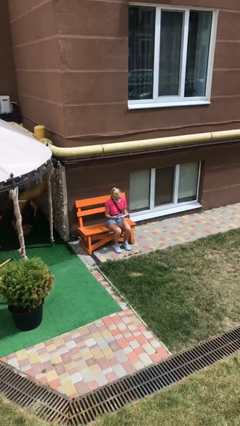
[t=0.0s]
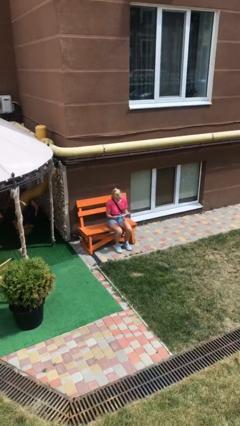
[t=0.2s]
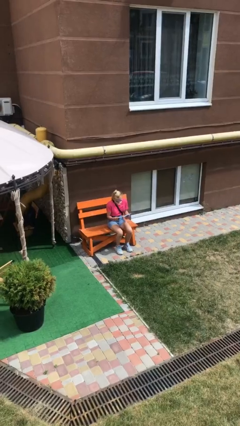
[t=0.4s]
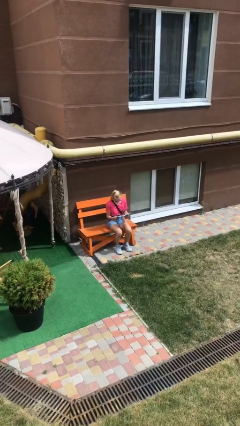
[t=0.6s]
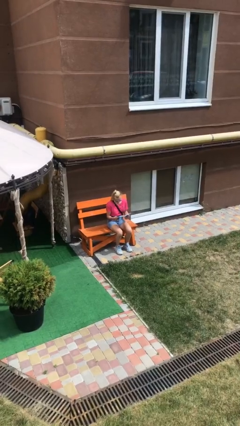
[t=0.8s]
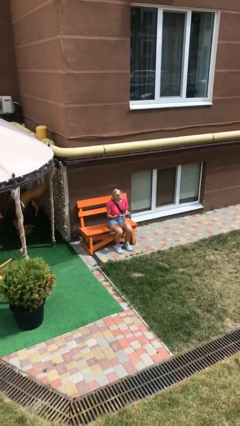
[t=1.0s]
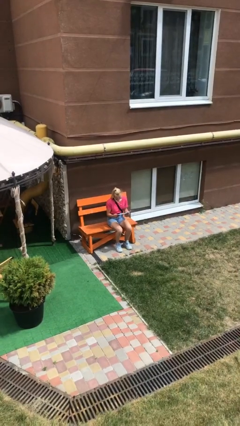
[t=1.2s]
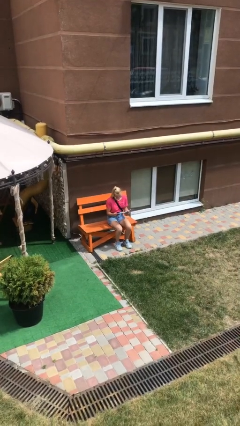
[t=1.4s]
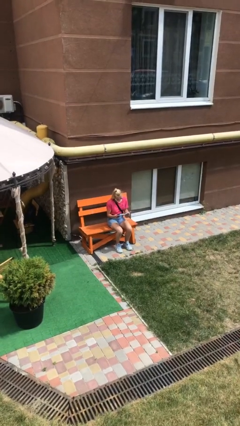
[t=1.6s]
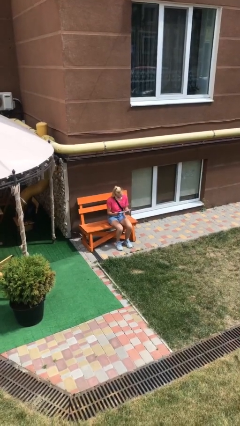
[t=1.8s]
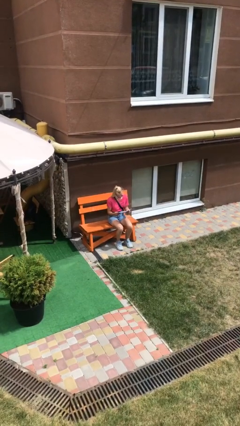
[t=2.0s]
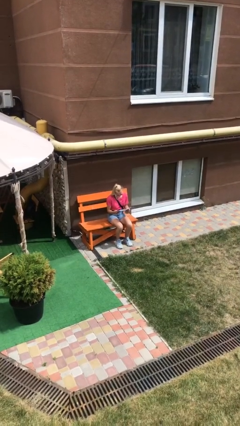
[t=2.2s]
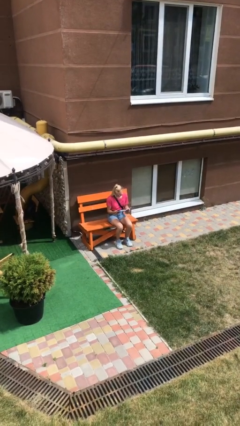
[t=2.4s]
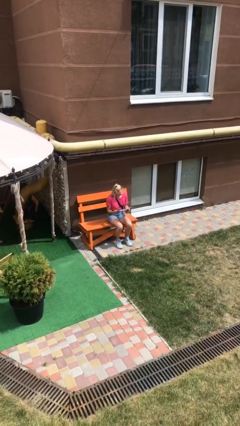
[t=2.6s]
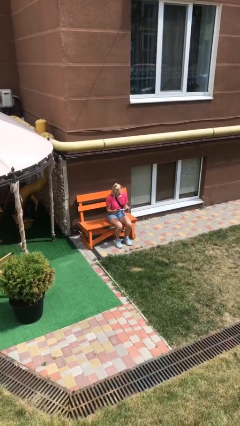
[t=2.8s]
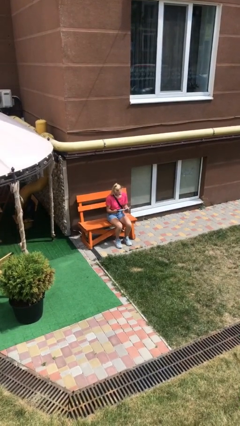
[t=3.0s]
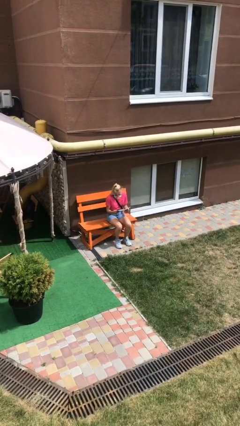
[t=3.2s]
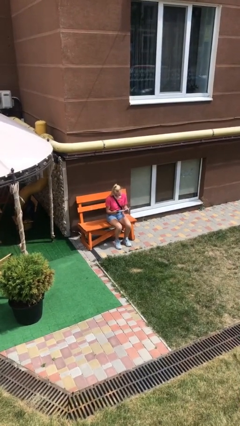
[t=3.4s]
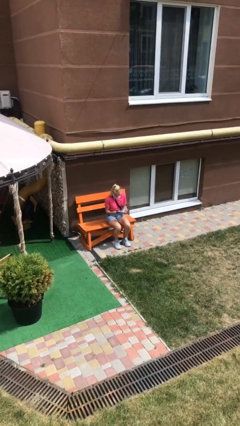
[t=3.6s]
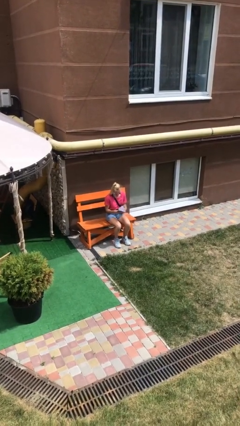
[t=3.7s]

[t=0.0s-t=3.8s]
person reads document

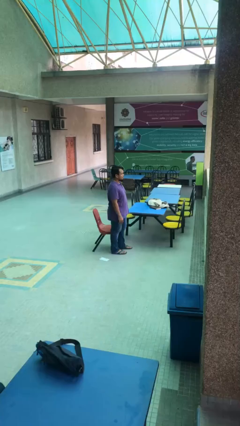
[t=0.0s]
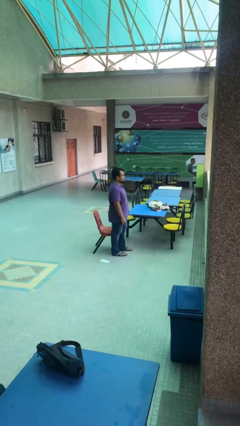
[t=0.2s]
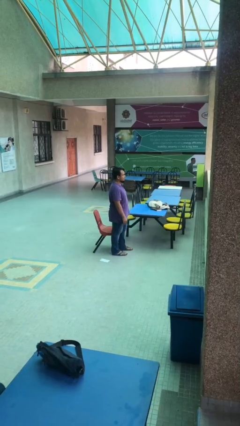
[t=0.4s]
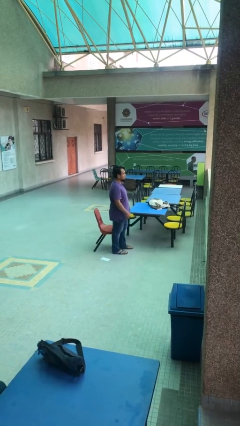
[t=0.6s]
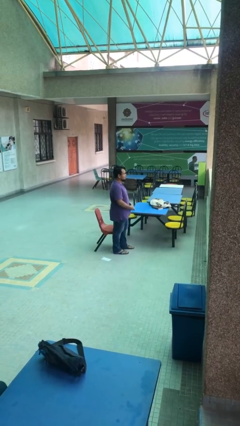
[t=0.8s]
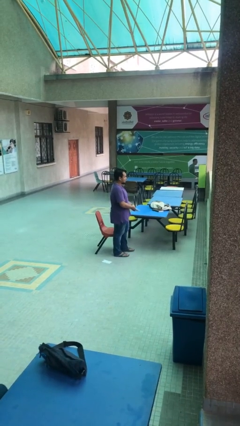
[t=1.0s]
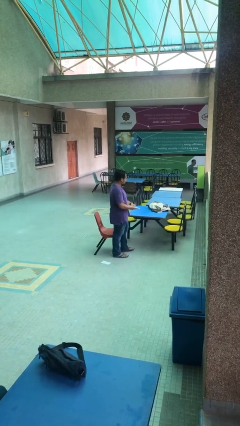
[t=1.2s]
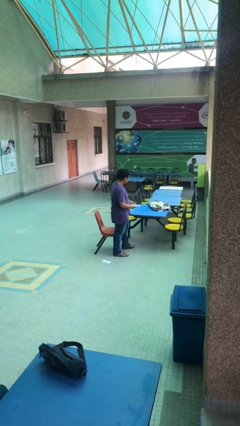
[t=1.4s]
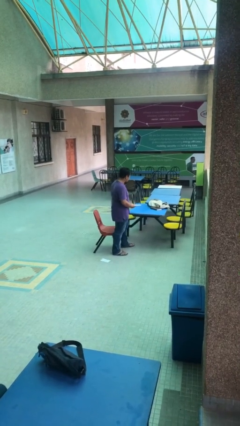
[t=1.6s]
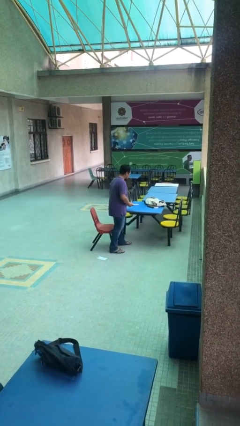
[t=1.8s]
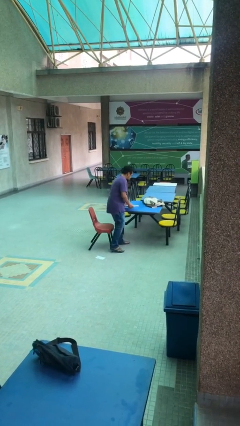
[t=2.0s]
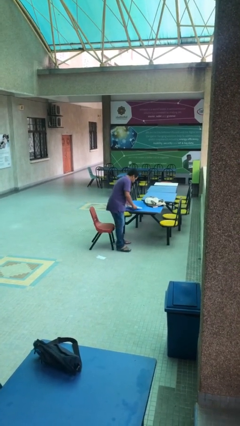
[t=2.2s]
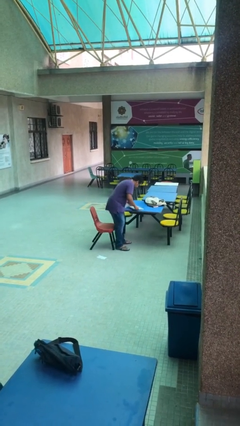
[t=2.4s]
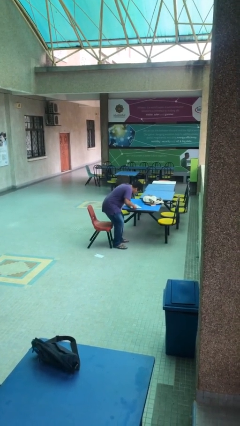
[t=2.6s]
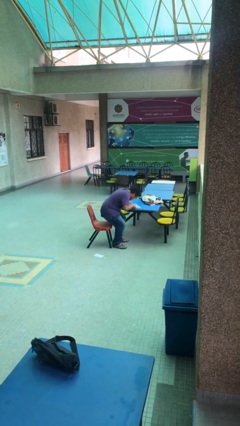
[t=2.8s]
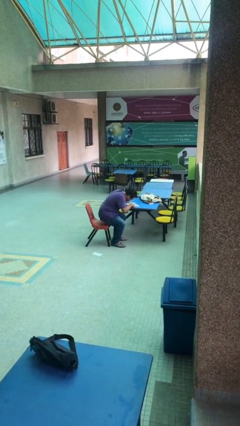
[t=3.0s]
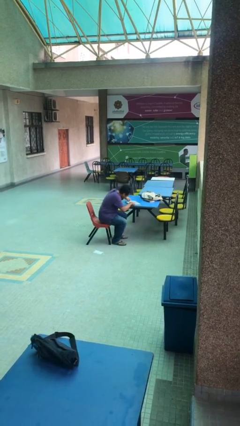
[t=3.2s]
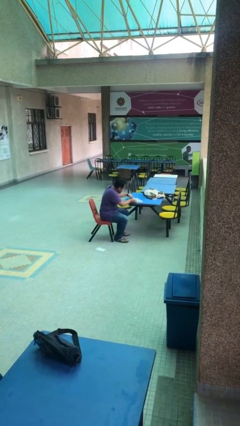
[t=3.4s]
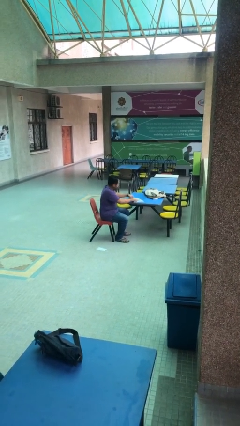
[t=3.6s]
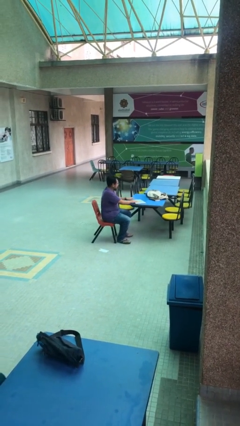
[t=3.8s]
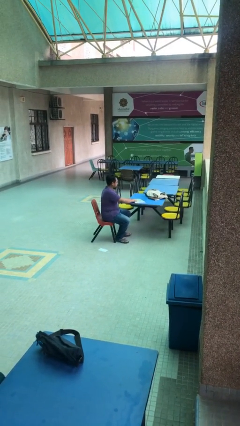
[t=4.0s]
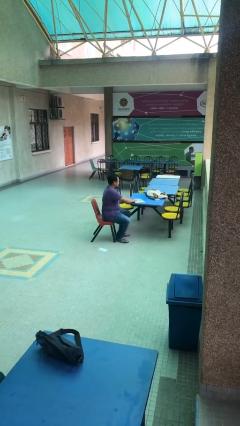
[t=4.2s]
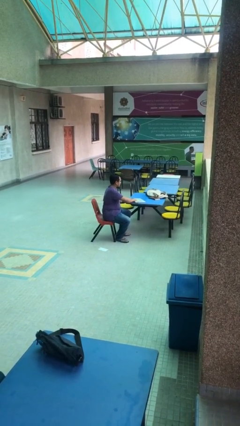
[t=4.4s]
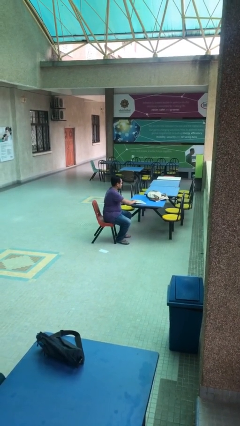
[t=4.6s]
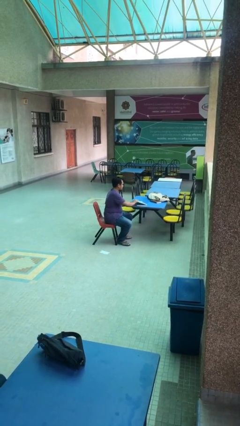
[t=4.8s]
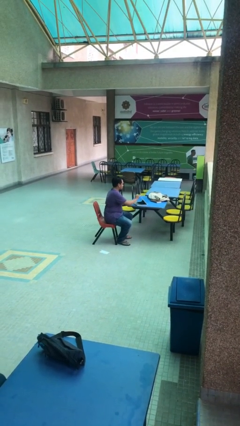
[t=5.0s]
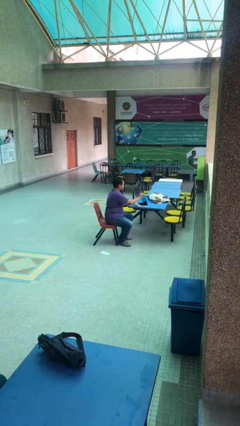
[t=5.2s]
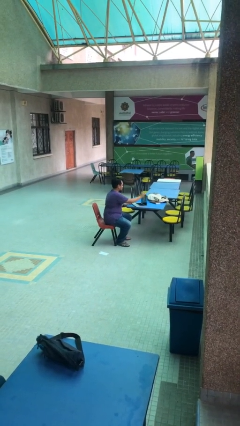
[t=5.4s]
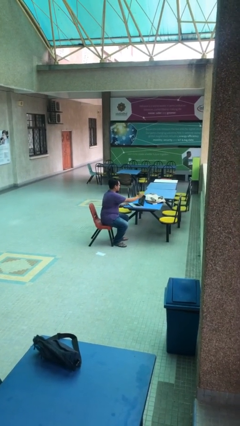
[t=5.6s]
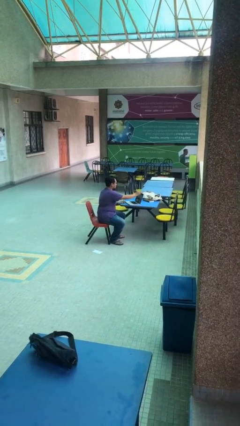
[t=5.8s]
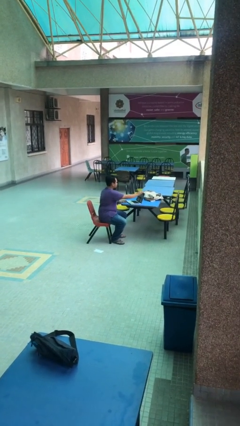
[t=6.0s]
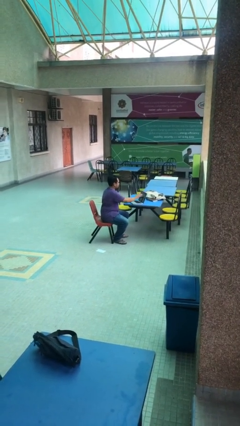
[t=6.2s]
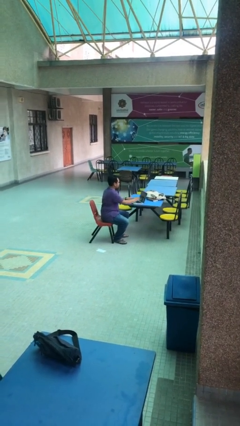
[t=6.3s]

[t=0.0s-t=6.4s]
person sits down

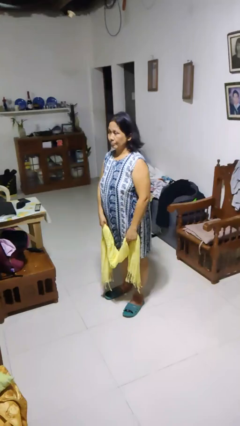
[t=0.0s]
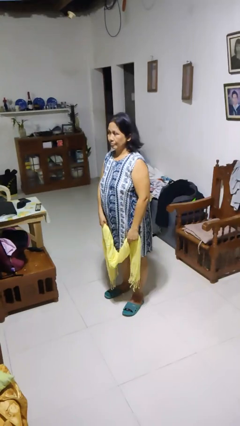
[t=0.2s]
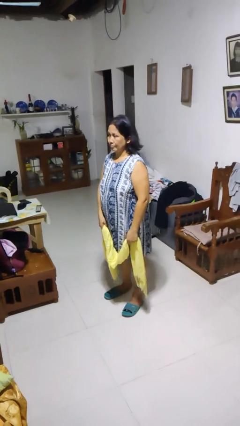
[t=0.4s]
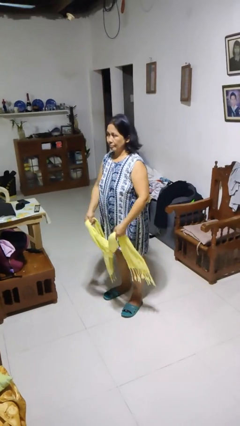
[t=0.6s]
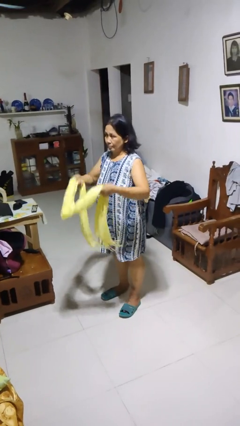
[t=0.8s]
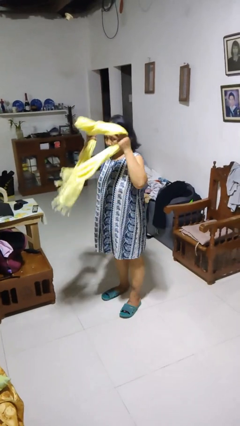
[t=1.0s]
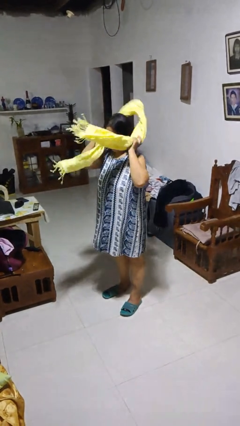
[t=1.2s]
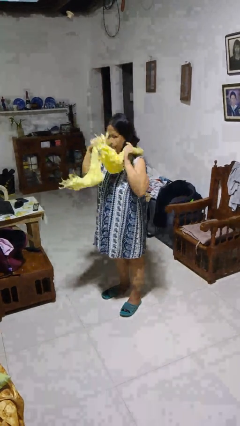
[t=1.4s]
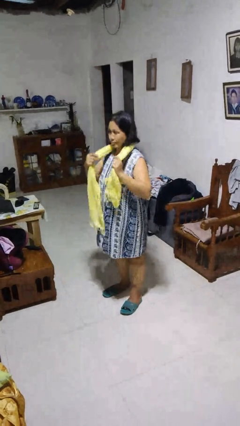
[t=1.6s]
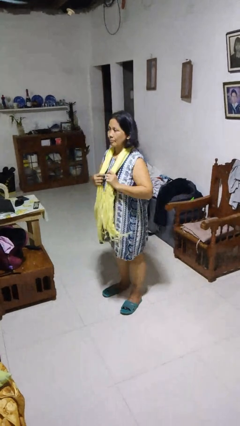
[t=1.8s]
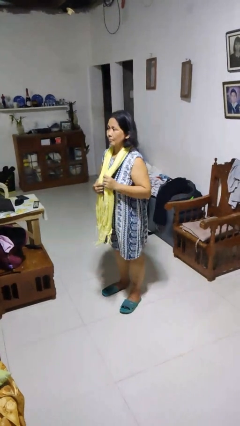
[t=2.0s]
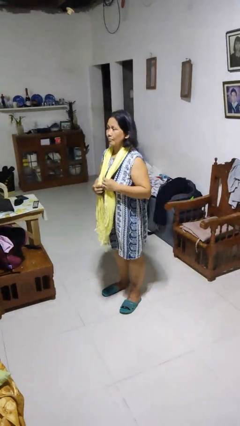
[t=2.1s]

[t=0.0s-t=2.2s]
person puts on scarf

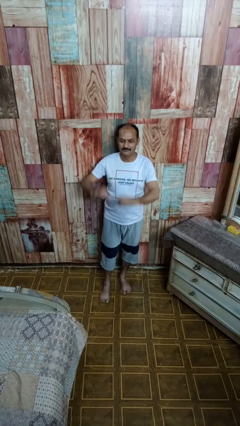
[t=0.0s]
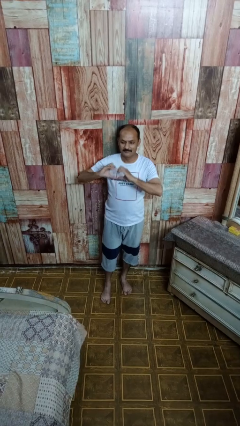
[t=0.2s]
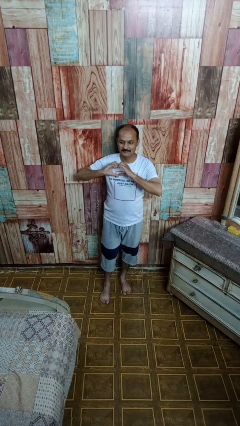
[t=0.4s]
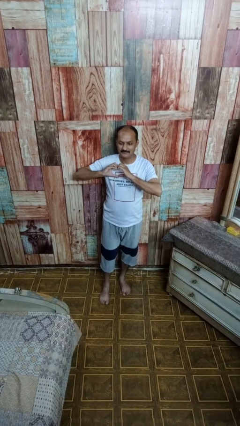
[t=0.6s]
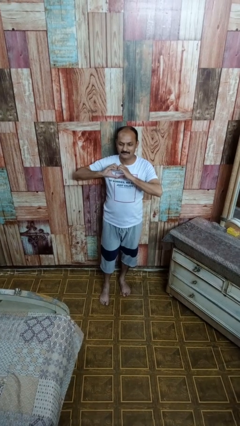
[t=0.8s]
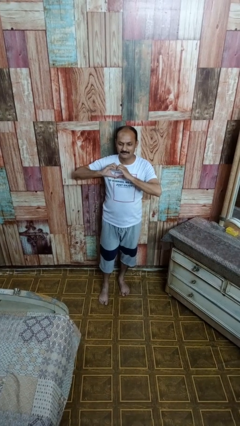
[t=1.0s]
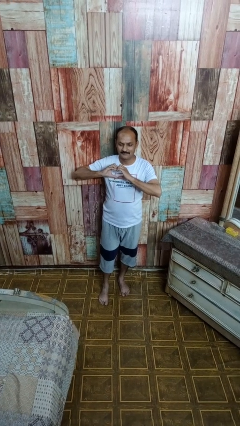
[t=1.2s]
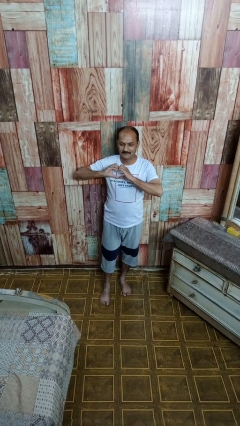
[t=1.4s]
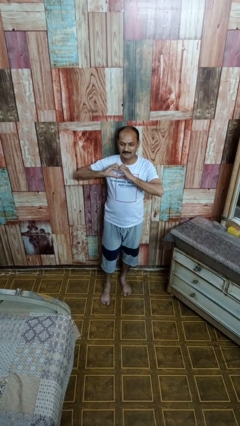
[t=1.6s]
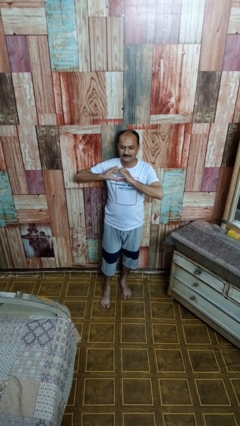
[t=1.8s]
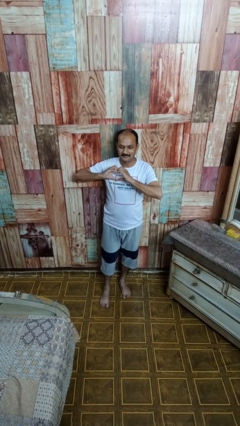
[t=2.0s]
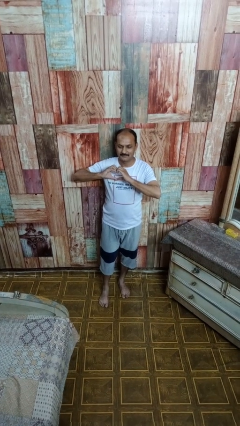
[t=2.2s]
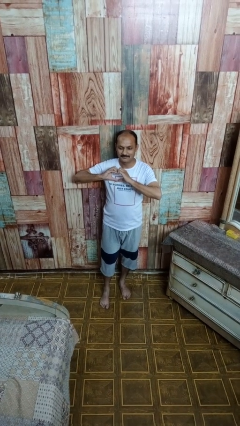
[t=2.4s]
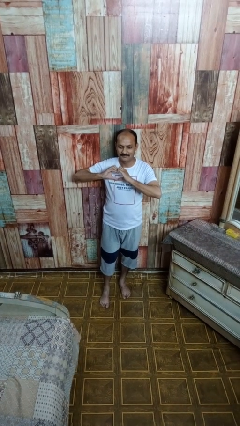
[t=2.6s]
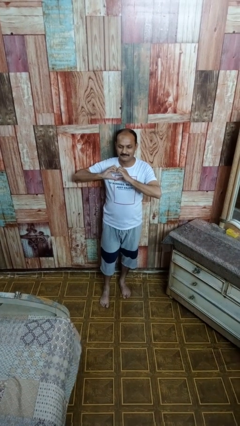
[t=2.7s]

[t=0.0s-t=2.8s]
person gestures heart

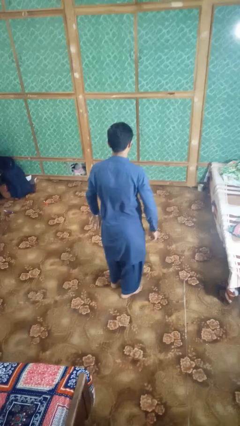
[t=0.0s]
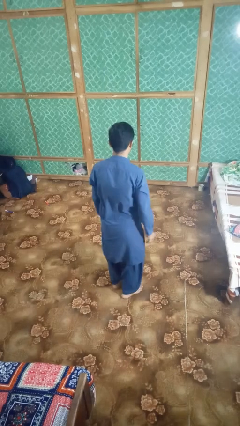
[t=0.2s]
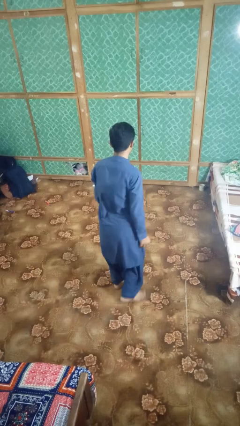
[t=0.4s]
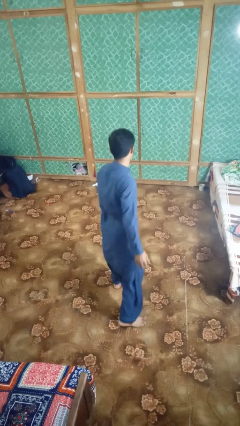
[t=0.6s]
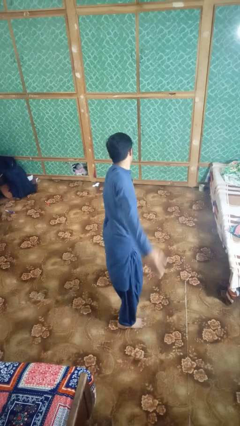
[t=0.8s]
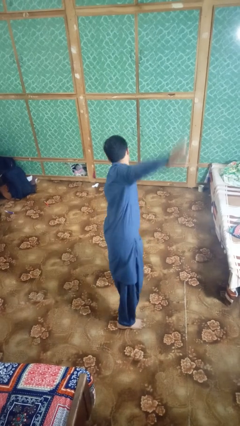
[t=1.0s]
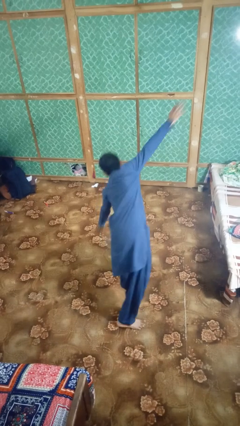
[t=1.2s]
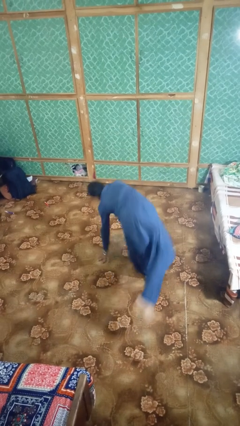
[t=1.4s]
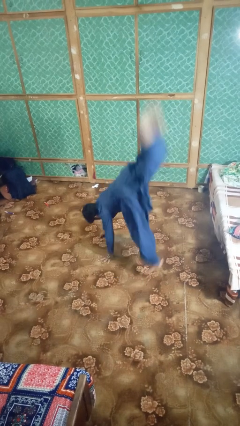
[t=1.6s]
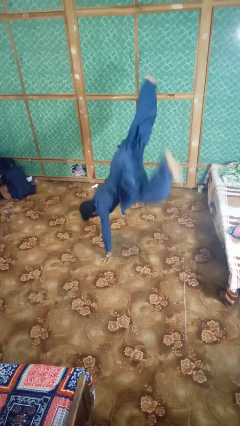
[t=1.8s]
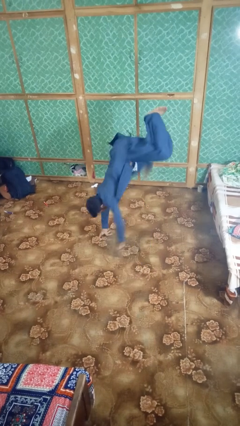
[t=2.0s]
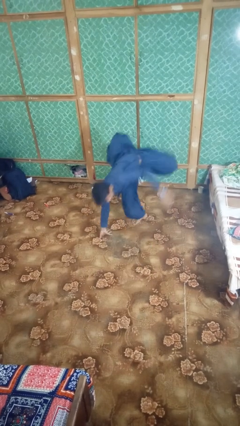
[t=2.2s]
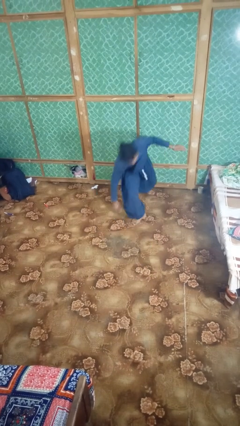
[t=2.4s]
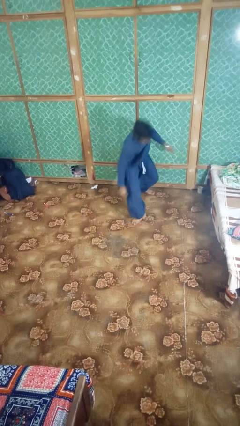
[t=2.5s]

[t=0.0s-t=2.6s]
person somersaults
